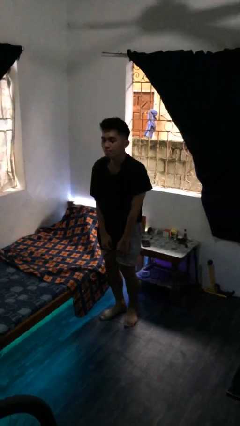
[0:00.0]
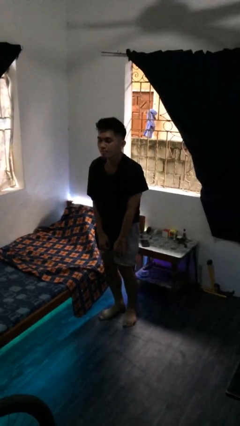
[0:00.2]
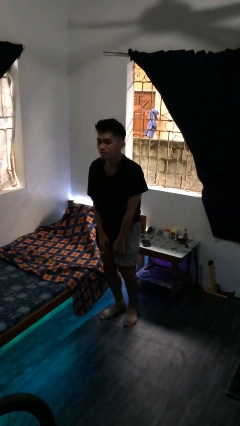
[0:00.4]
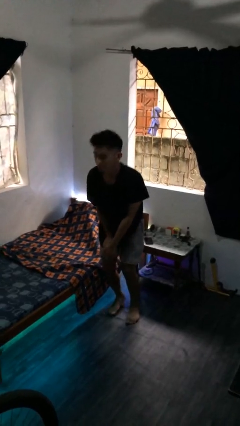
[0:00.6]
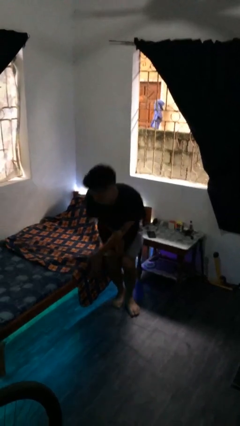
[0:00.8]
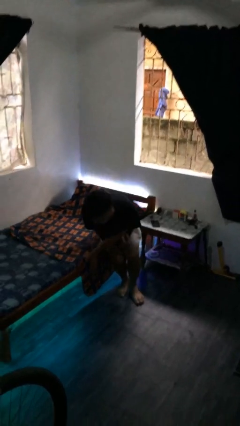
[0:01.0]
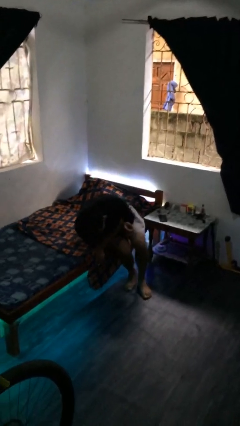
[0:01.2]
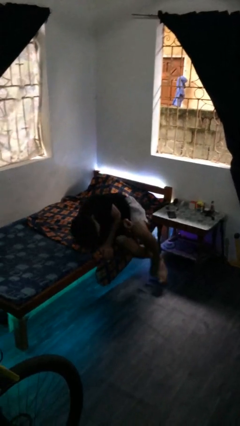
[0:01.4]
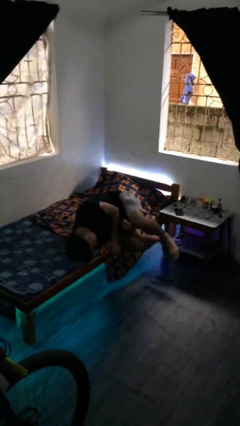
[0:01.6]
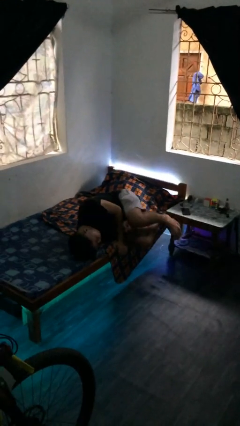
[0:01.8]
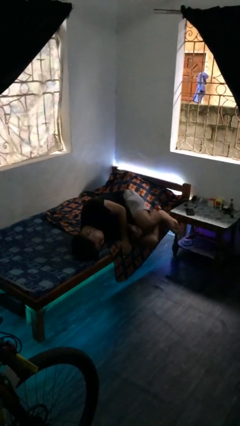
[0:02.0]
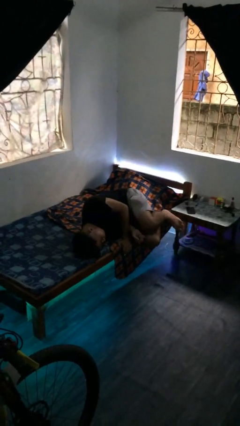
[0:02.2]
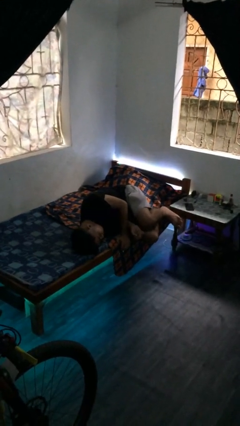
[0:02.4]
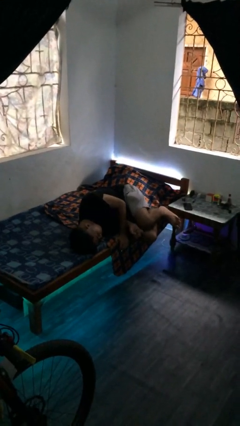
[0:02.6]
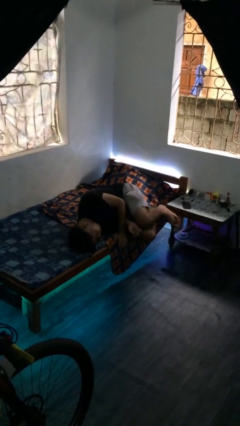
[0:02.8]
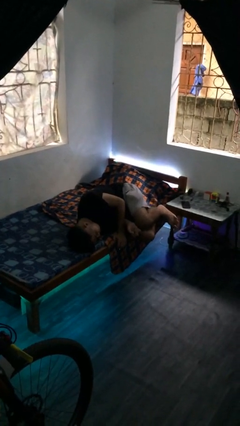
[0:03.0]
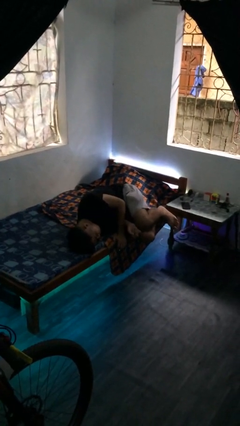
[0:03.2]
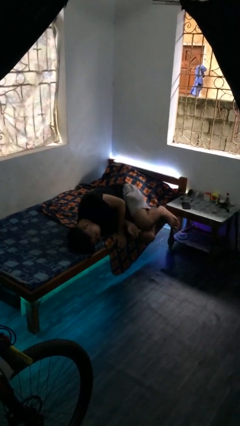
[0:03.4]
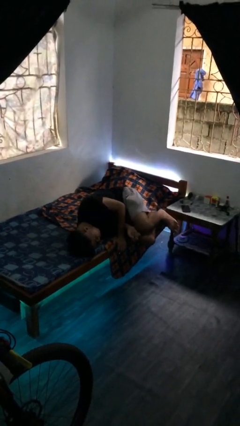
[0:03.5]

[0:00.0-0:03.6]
person lies down on bed

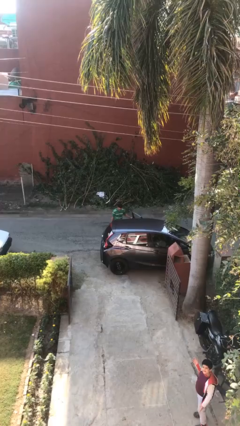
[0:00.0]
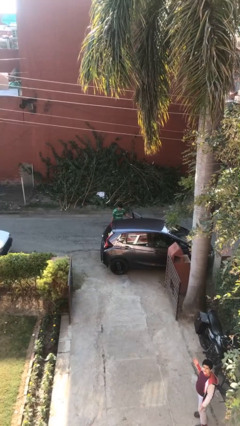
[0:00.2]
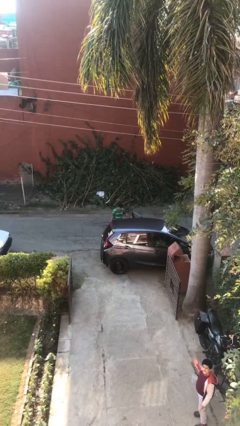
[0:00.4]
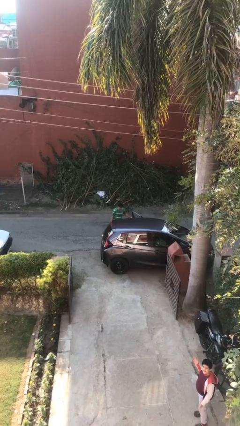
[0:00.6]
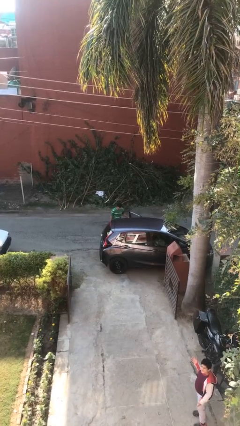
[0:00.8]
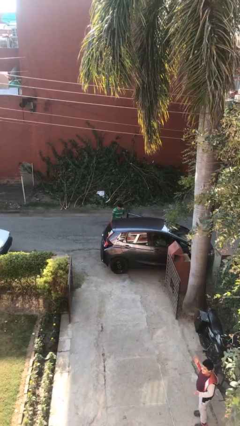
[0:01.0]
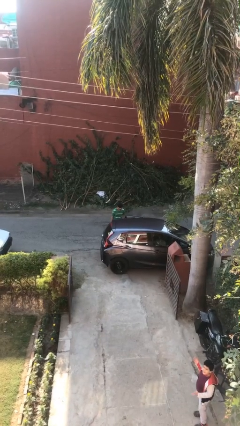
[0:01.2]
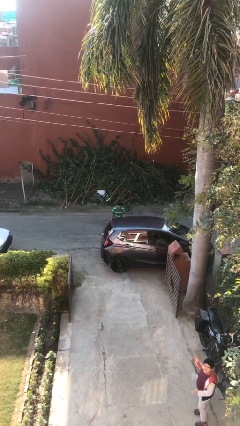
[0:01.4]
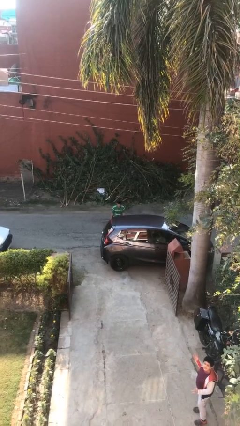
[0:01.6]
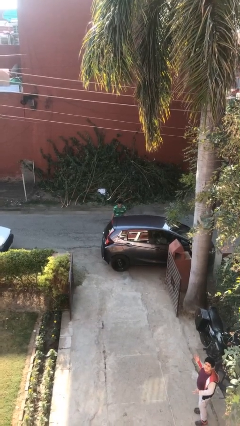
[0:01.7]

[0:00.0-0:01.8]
person closes car door

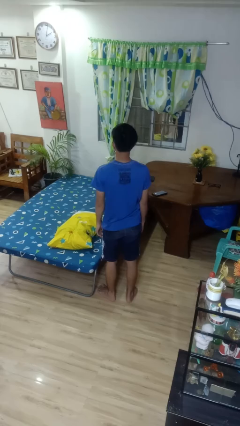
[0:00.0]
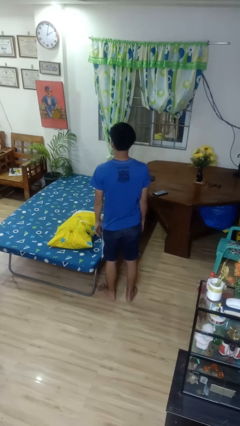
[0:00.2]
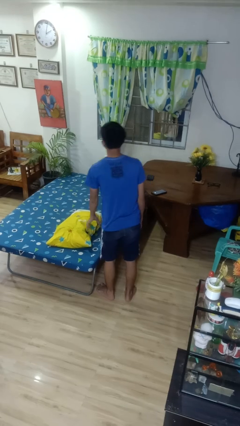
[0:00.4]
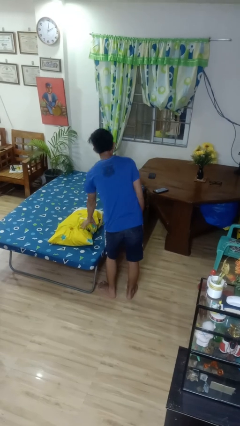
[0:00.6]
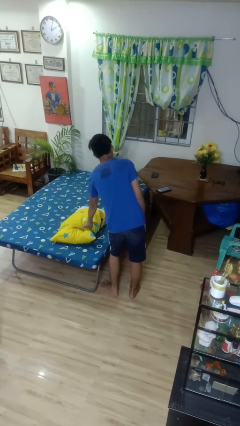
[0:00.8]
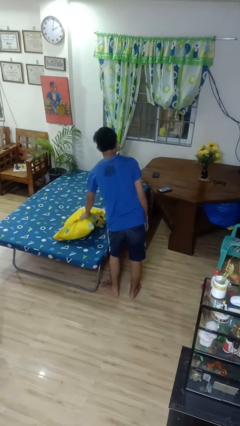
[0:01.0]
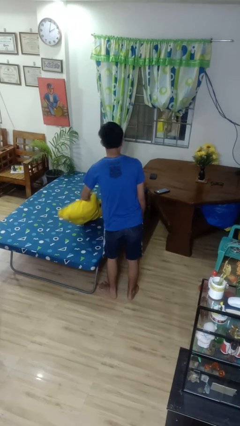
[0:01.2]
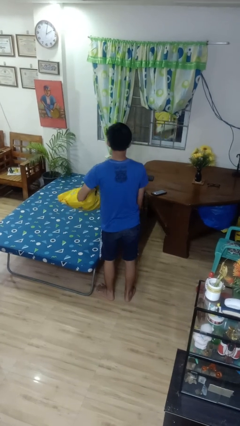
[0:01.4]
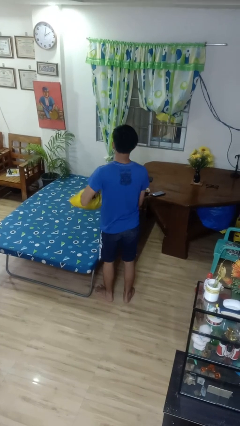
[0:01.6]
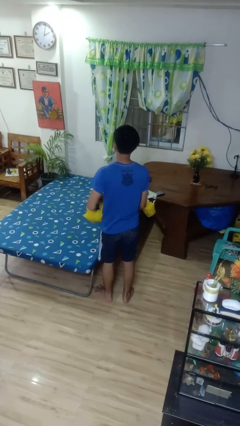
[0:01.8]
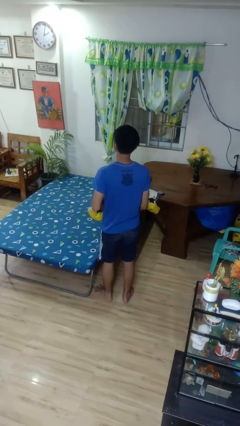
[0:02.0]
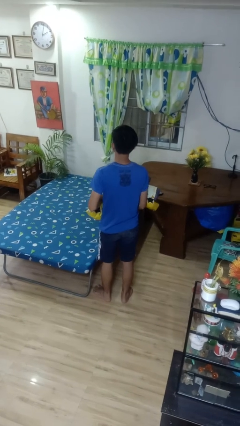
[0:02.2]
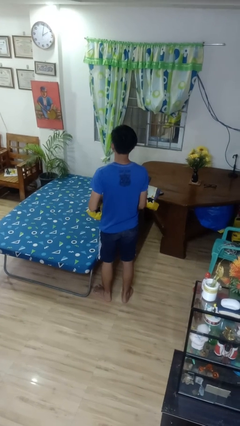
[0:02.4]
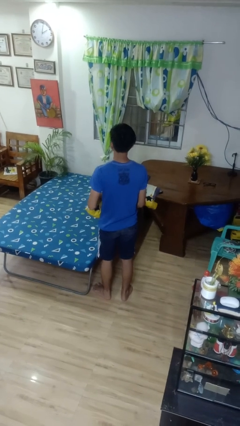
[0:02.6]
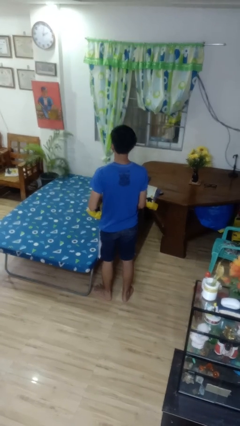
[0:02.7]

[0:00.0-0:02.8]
person picks up object from bed

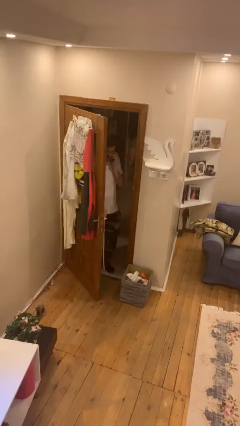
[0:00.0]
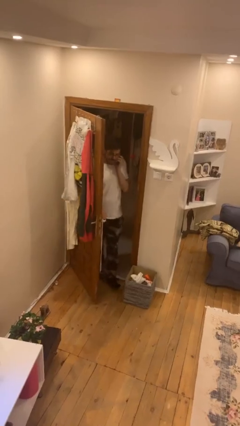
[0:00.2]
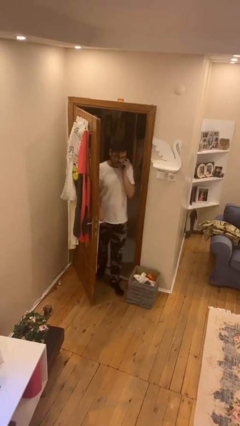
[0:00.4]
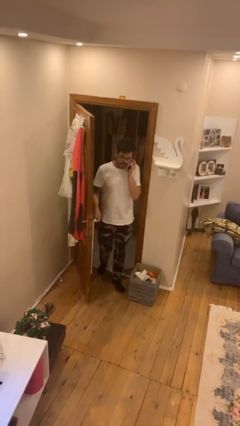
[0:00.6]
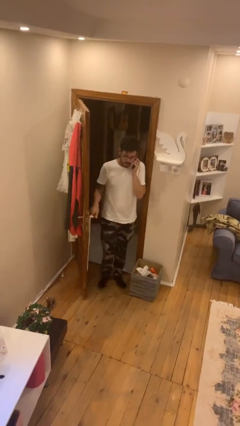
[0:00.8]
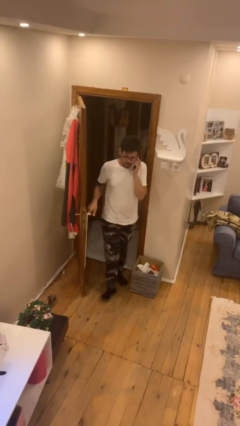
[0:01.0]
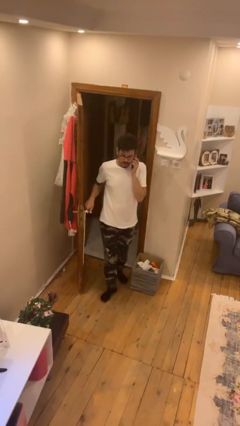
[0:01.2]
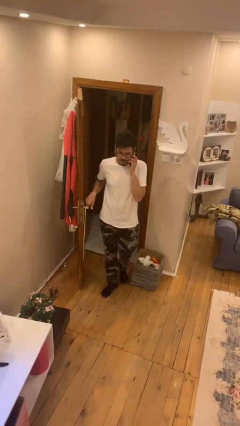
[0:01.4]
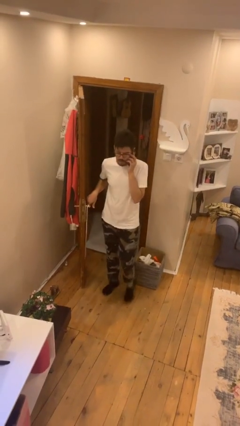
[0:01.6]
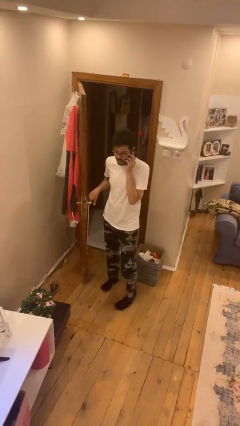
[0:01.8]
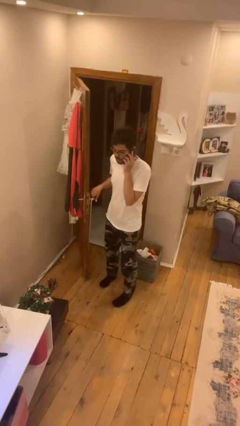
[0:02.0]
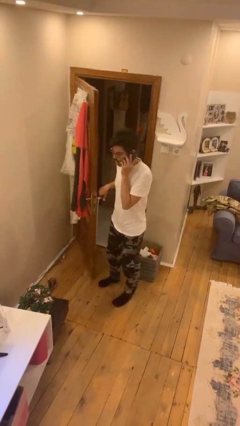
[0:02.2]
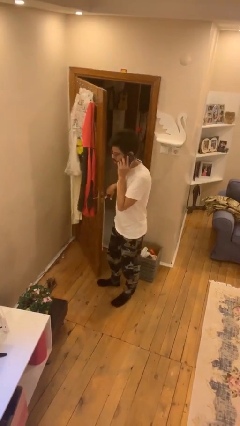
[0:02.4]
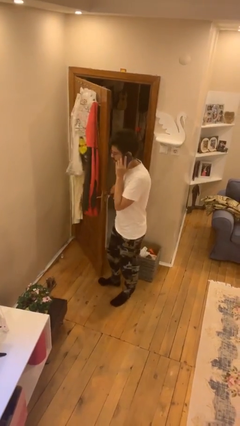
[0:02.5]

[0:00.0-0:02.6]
person enters scene through structure

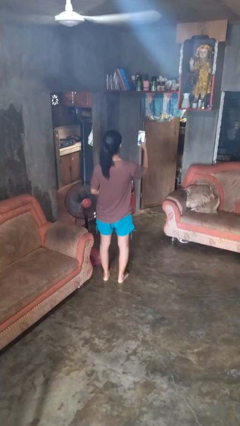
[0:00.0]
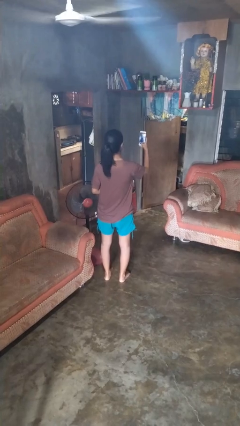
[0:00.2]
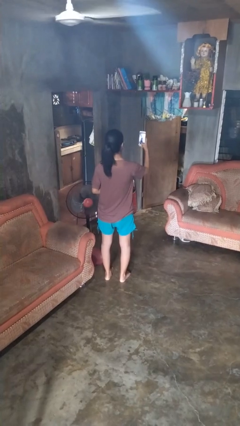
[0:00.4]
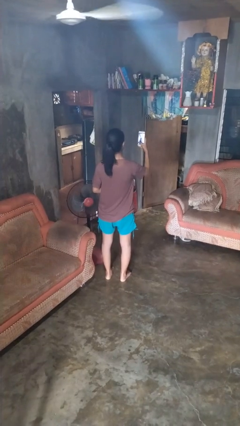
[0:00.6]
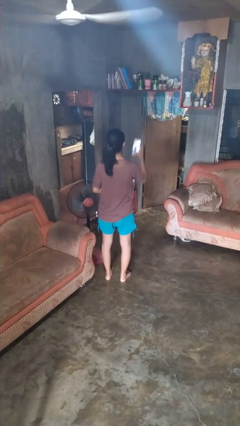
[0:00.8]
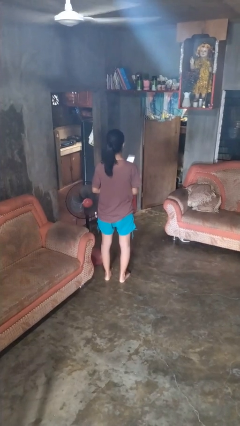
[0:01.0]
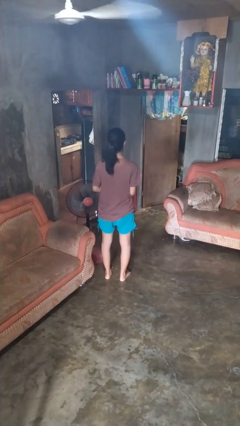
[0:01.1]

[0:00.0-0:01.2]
person takes selfie

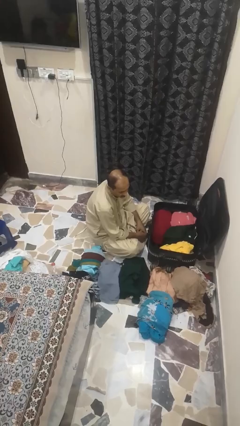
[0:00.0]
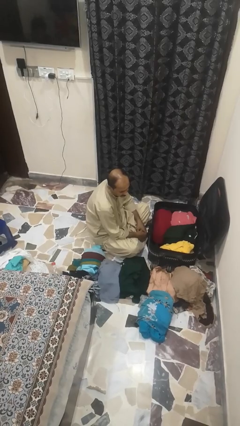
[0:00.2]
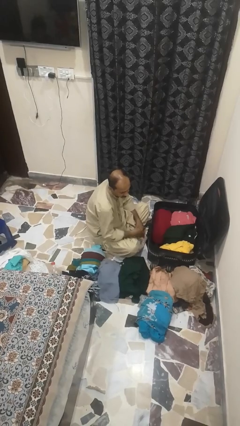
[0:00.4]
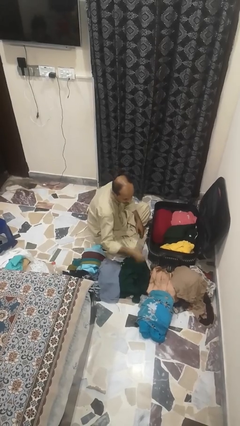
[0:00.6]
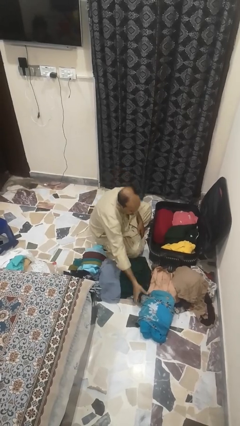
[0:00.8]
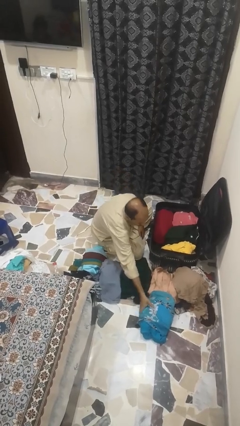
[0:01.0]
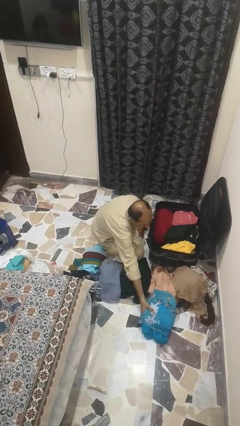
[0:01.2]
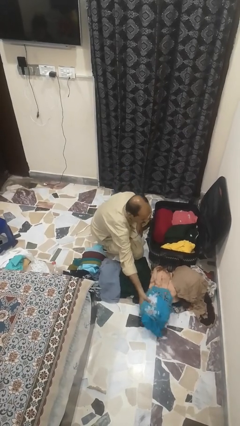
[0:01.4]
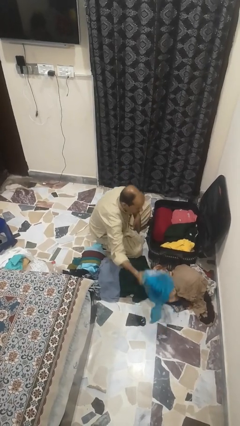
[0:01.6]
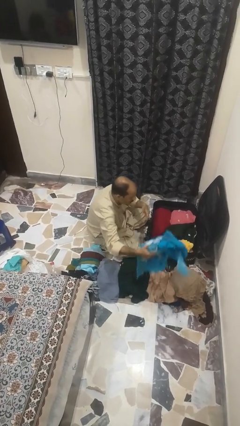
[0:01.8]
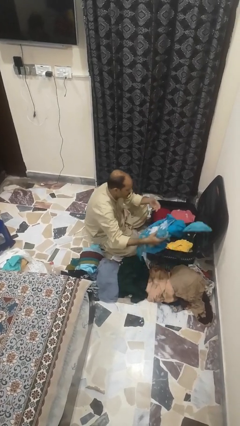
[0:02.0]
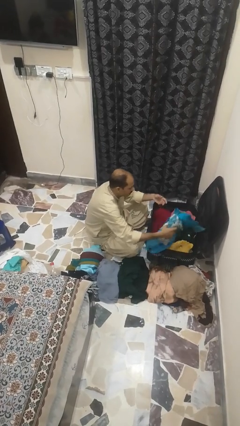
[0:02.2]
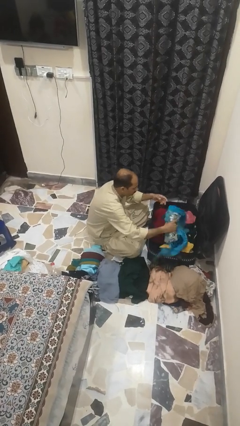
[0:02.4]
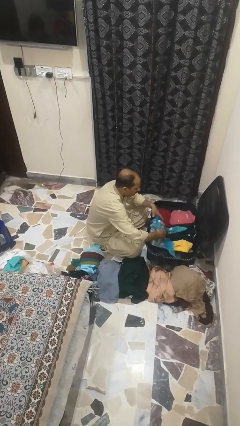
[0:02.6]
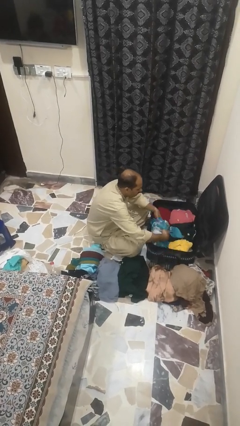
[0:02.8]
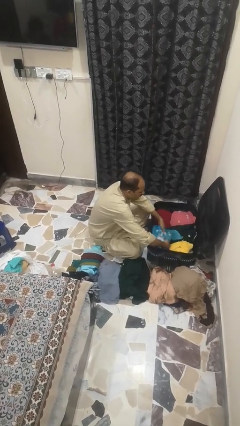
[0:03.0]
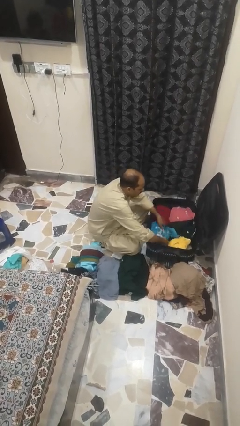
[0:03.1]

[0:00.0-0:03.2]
person loads clothes into suitcase

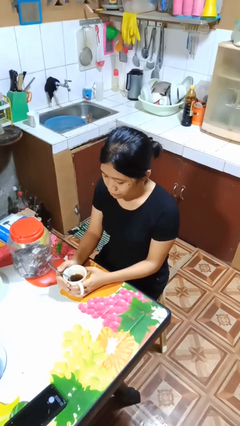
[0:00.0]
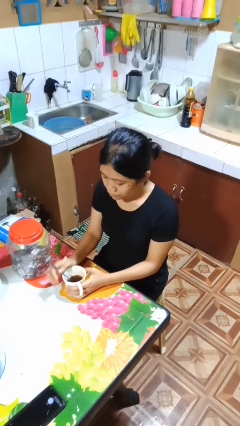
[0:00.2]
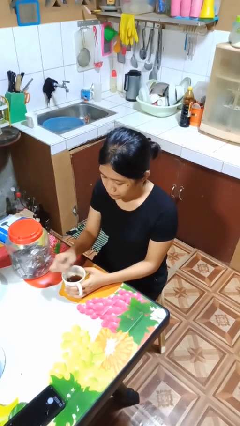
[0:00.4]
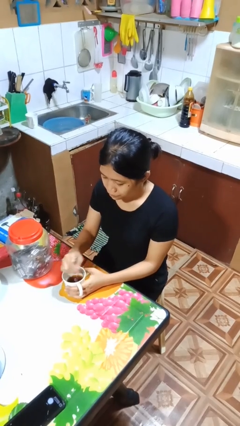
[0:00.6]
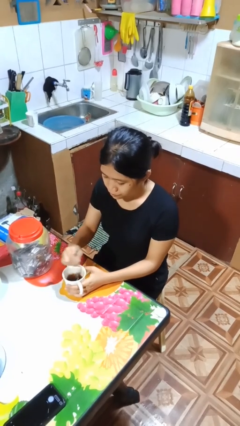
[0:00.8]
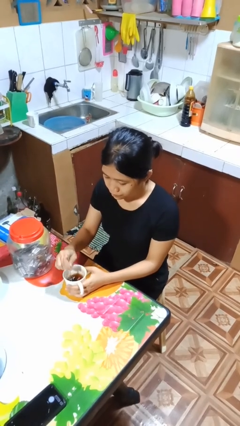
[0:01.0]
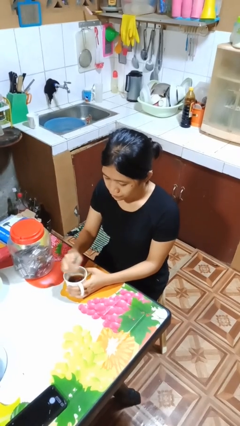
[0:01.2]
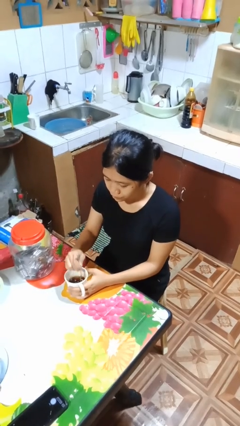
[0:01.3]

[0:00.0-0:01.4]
person stirs mug

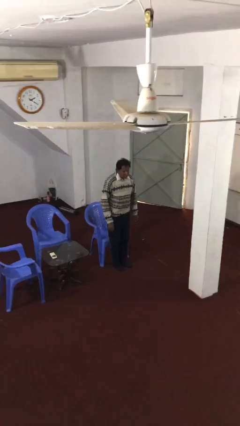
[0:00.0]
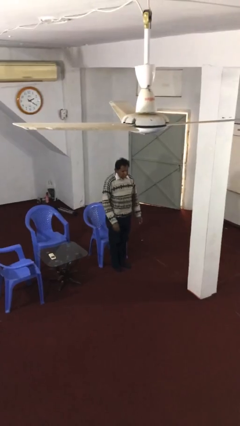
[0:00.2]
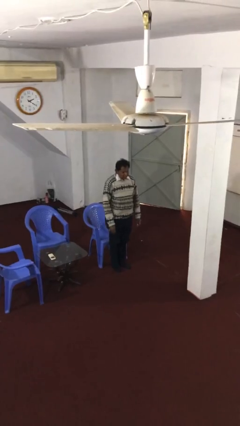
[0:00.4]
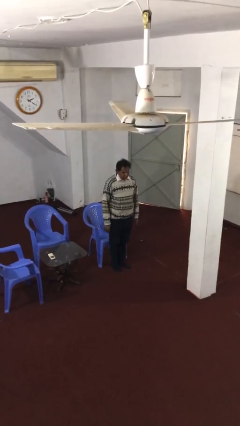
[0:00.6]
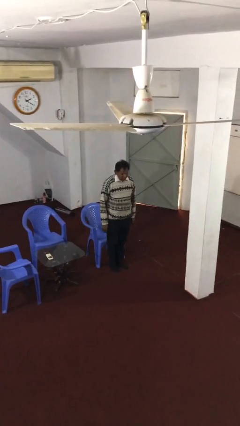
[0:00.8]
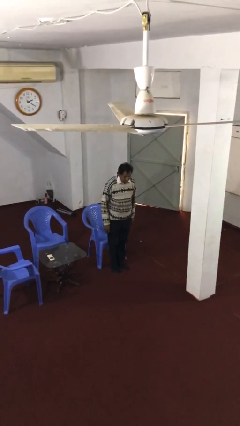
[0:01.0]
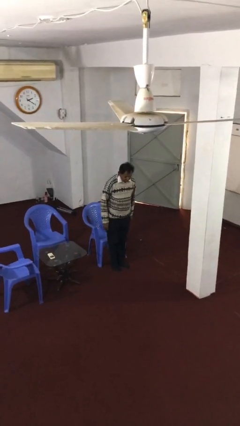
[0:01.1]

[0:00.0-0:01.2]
person stands up
